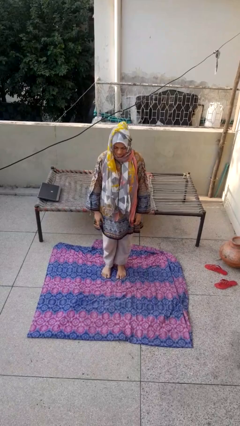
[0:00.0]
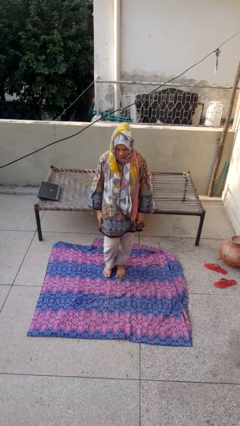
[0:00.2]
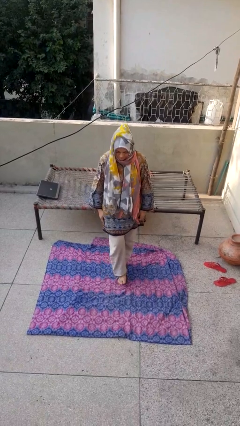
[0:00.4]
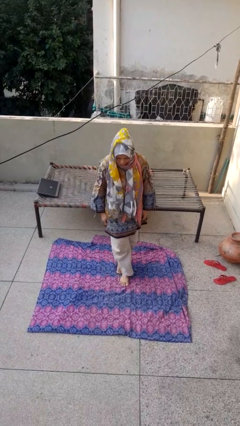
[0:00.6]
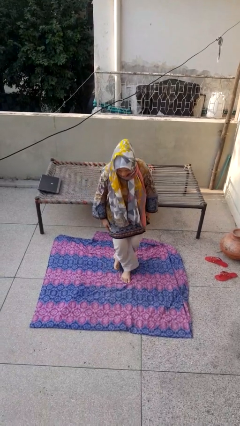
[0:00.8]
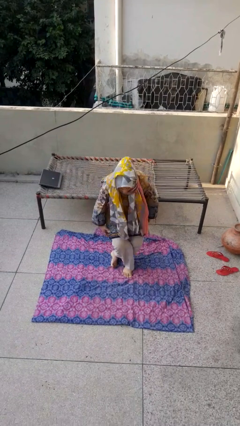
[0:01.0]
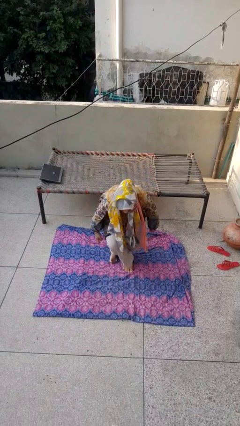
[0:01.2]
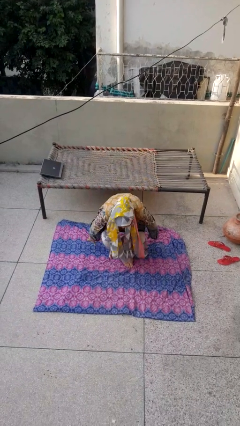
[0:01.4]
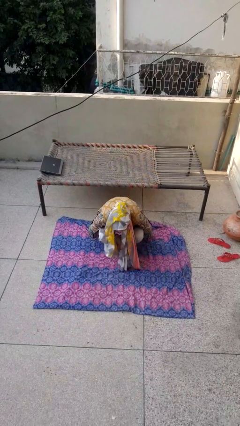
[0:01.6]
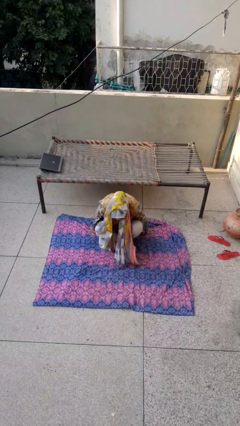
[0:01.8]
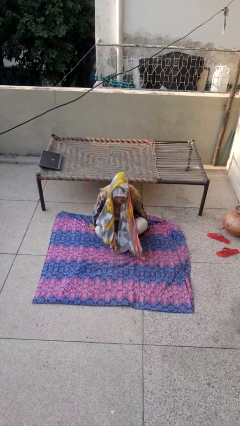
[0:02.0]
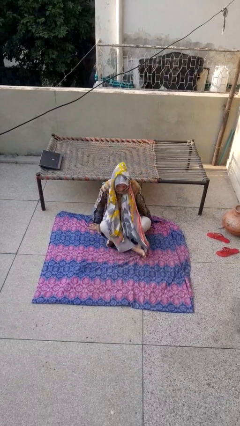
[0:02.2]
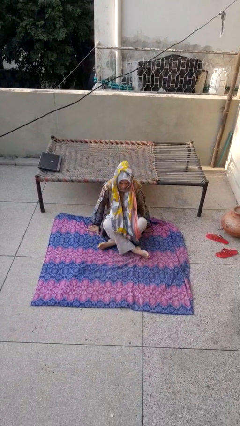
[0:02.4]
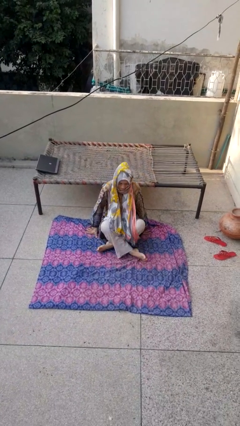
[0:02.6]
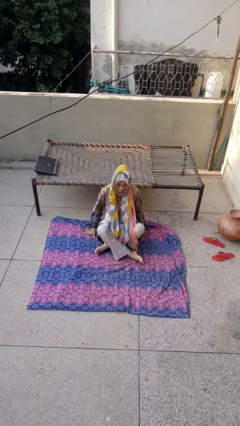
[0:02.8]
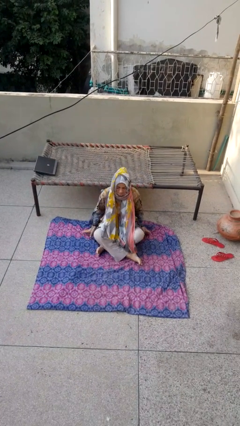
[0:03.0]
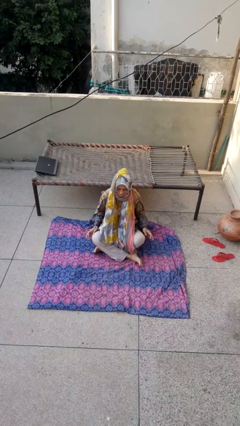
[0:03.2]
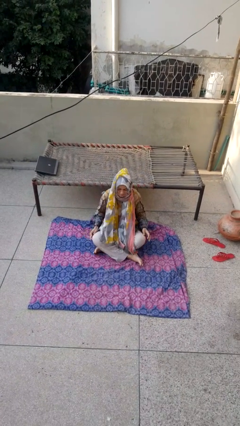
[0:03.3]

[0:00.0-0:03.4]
person sits crisscross

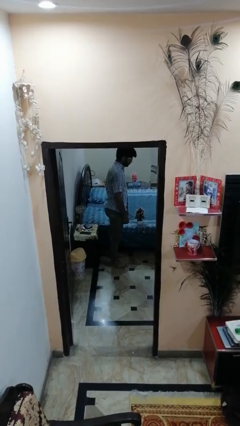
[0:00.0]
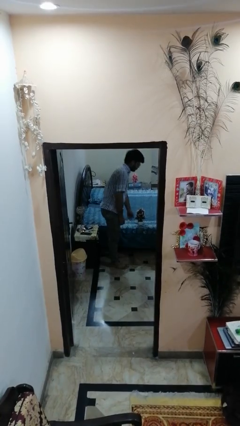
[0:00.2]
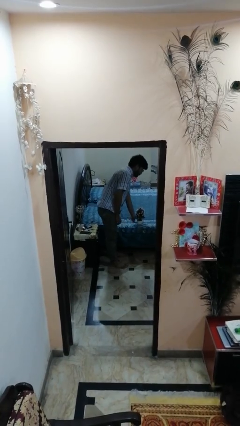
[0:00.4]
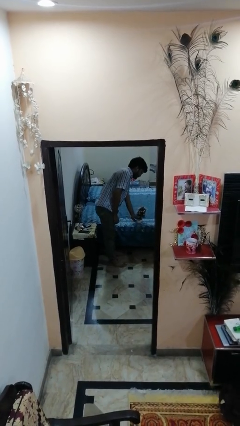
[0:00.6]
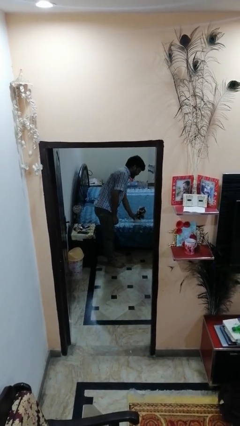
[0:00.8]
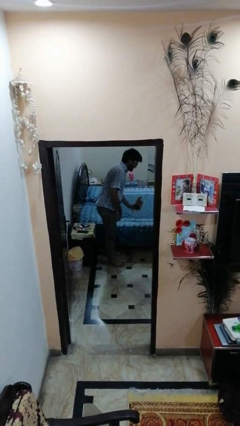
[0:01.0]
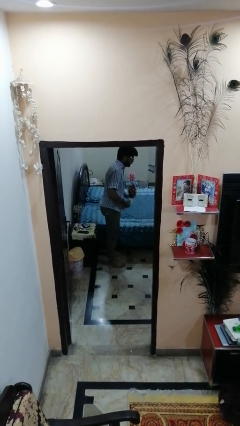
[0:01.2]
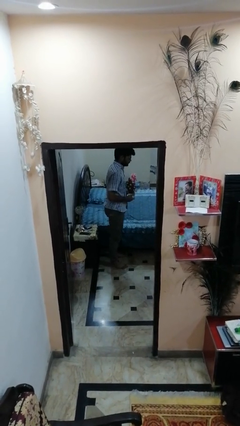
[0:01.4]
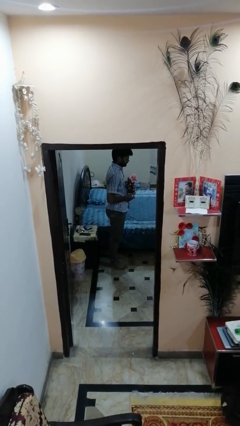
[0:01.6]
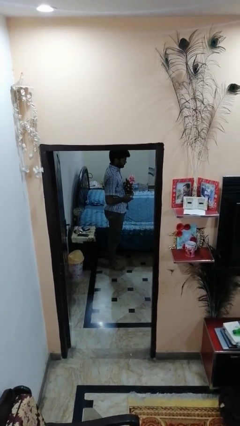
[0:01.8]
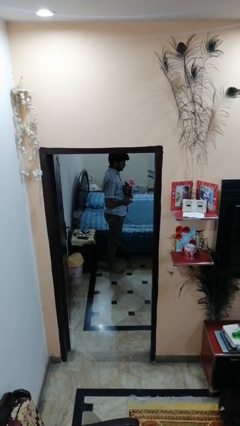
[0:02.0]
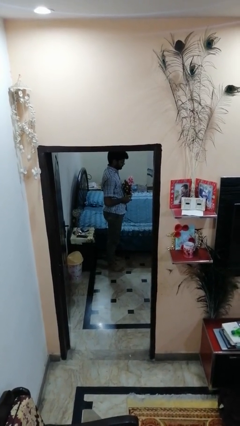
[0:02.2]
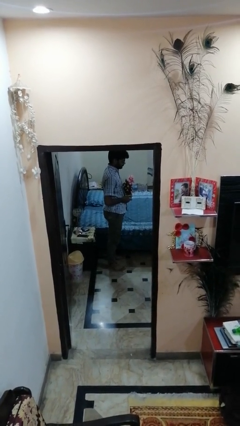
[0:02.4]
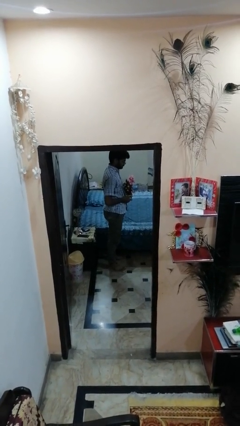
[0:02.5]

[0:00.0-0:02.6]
person picks up object from bed

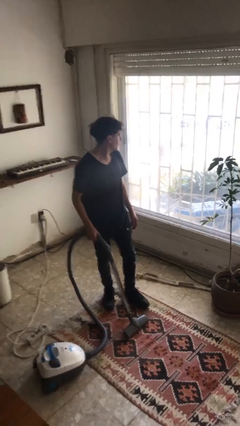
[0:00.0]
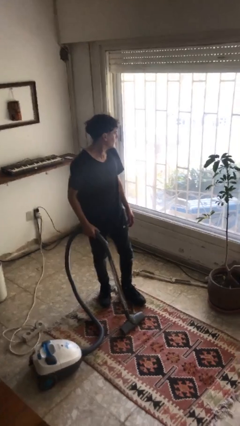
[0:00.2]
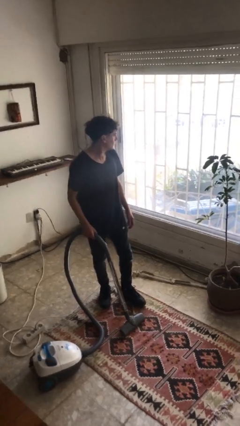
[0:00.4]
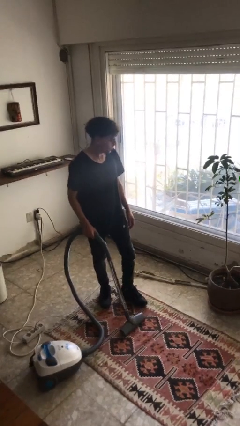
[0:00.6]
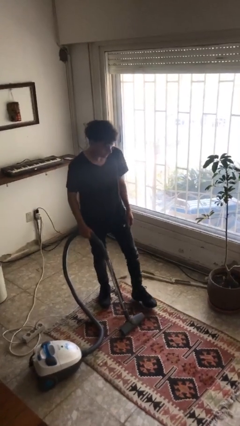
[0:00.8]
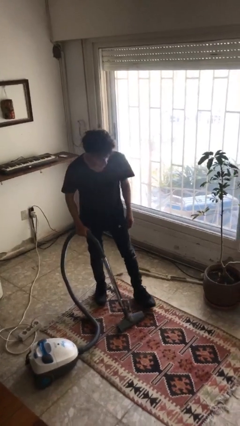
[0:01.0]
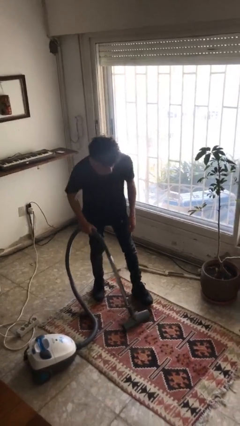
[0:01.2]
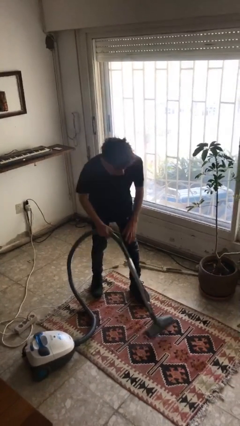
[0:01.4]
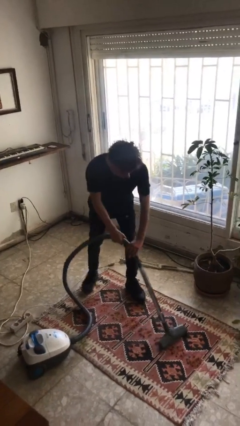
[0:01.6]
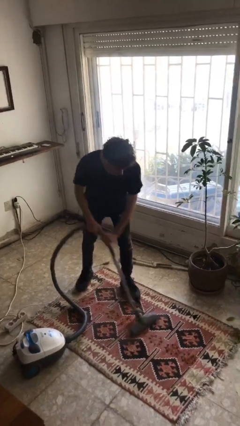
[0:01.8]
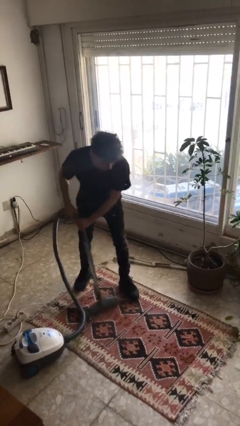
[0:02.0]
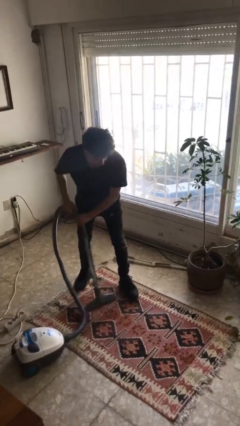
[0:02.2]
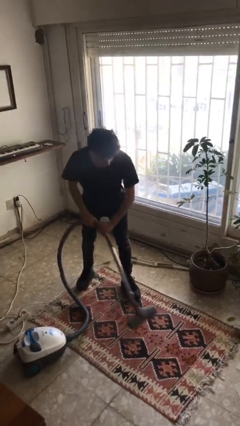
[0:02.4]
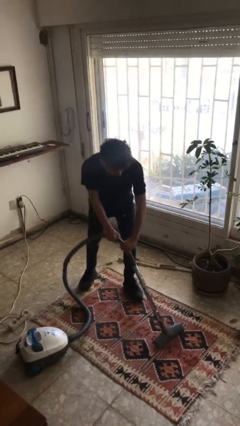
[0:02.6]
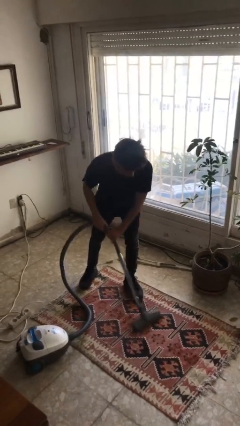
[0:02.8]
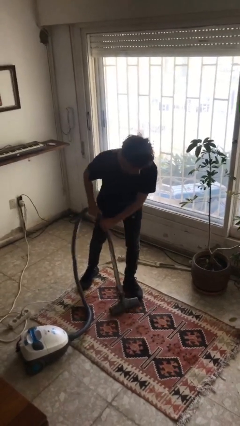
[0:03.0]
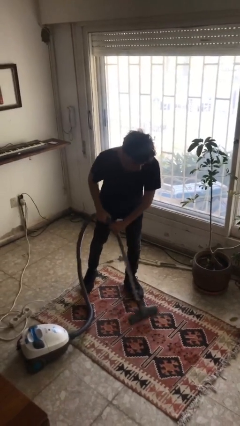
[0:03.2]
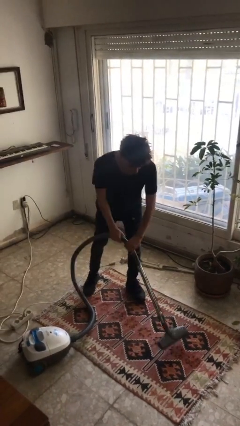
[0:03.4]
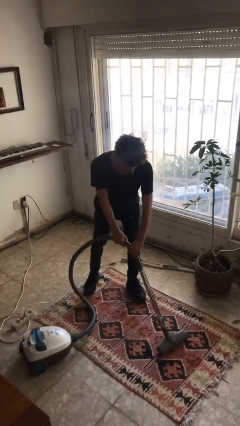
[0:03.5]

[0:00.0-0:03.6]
person vacuums carpet

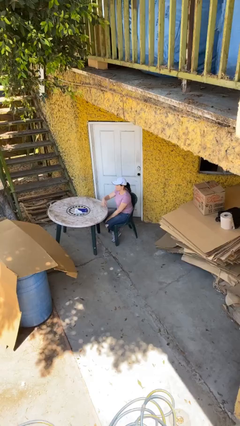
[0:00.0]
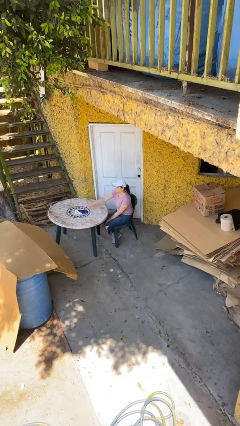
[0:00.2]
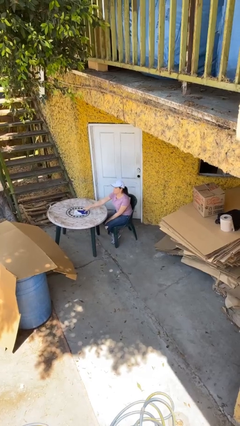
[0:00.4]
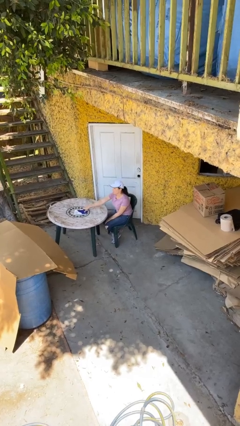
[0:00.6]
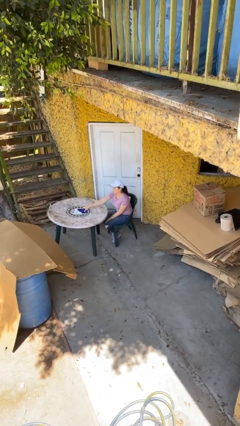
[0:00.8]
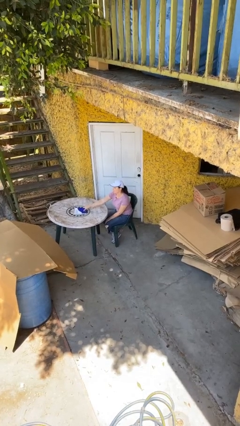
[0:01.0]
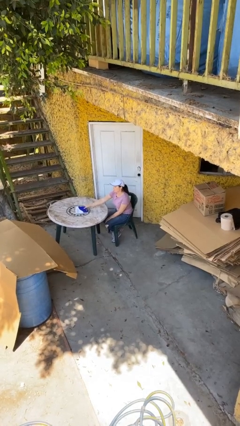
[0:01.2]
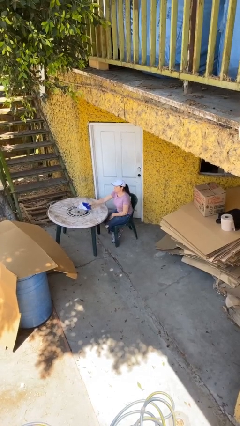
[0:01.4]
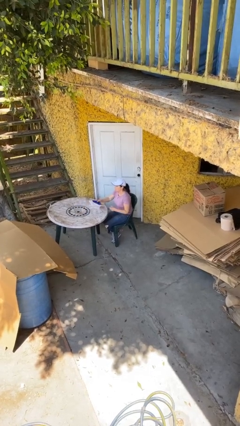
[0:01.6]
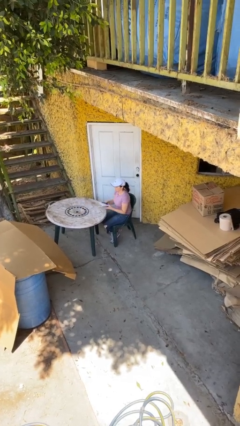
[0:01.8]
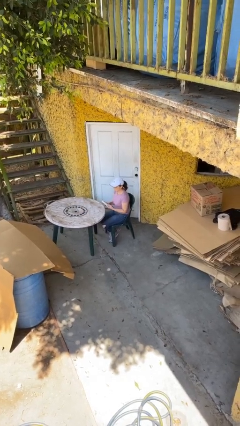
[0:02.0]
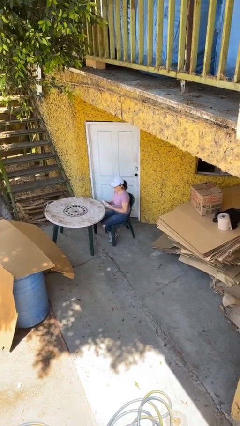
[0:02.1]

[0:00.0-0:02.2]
person picks up object from table

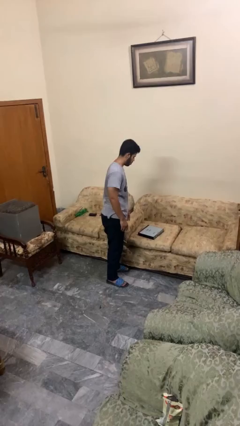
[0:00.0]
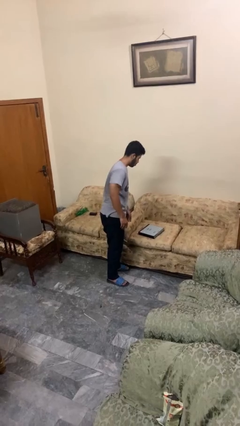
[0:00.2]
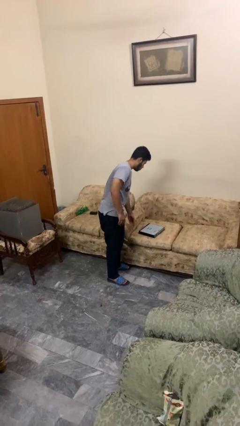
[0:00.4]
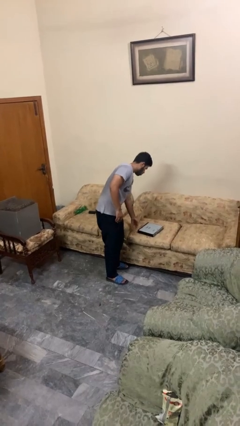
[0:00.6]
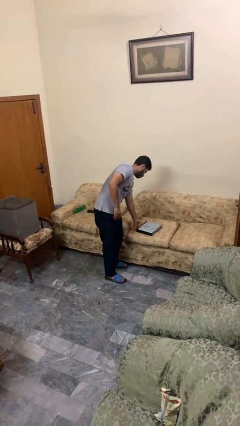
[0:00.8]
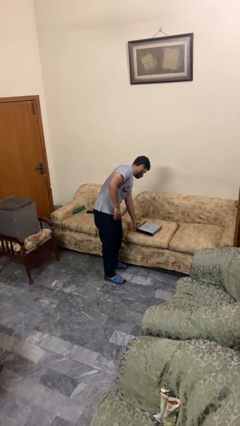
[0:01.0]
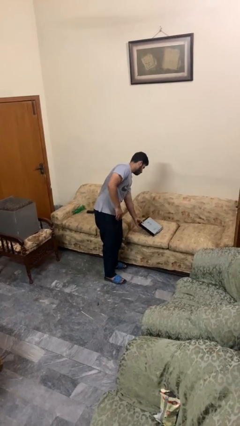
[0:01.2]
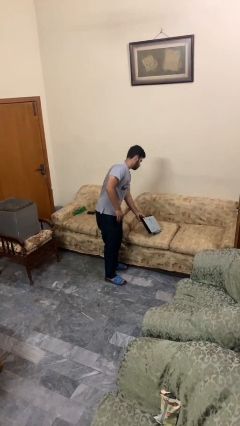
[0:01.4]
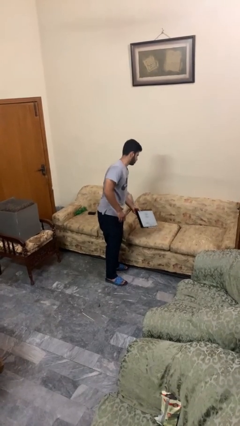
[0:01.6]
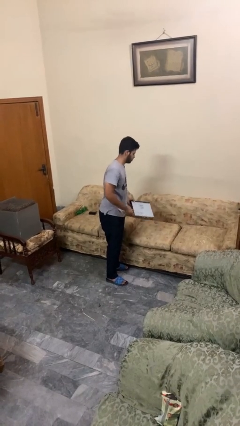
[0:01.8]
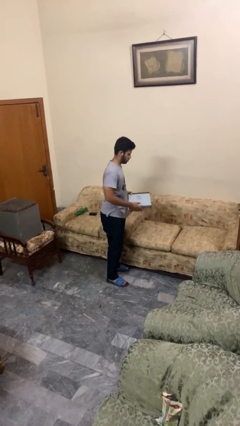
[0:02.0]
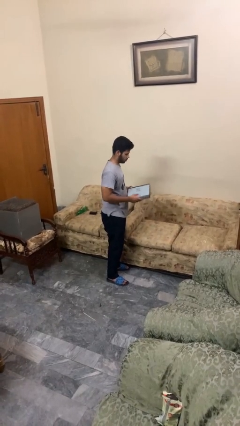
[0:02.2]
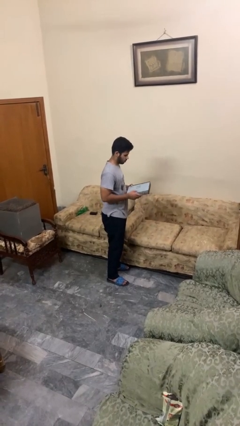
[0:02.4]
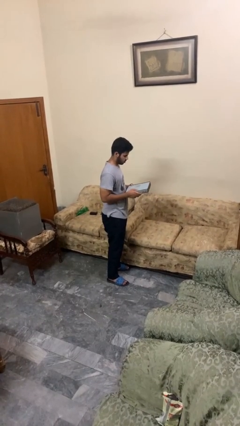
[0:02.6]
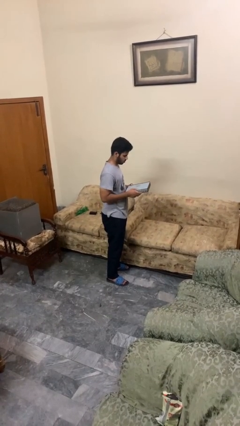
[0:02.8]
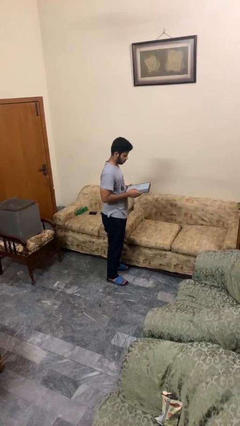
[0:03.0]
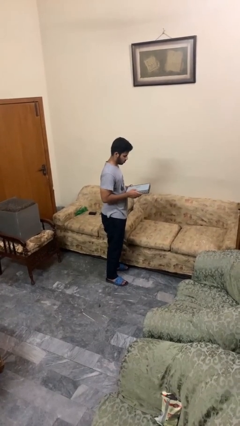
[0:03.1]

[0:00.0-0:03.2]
person picks up object from couch

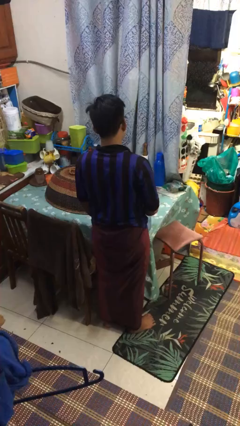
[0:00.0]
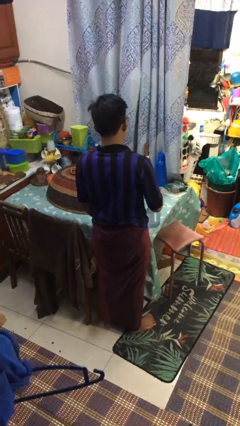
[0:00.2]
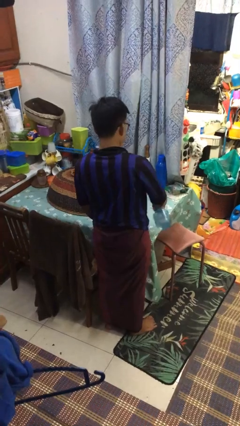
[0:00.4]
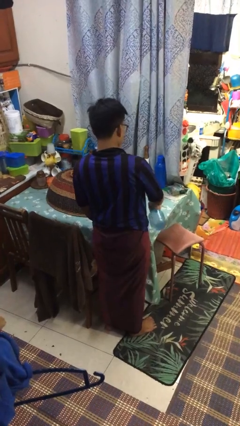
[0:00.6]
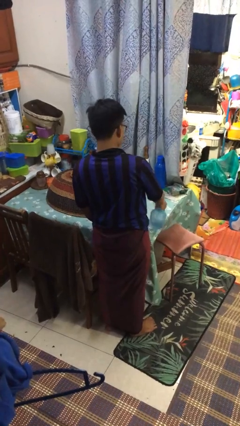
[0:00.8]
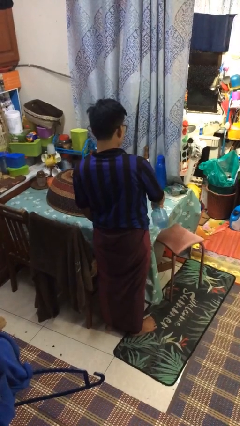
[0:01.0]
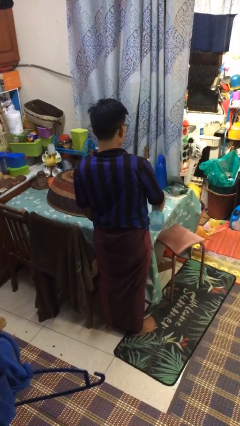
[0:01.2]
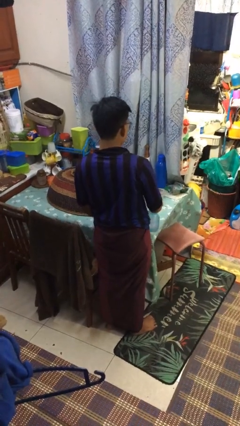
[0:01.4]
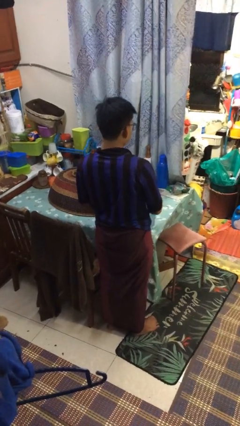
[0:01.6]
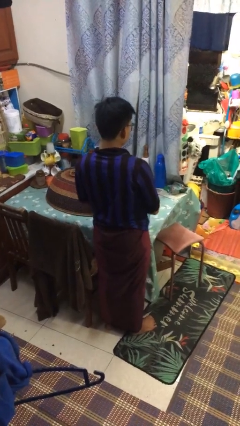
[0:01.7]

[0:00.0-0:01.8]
person sprays from bottle
